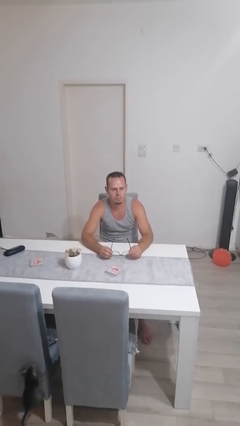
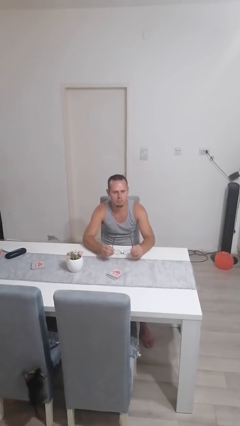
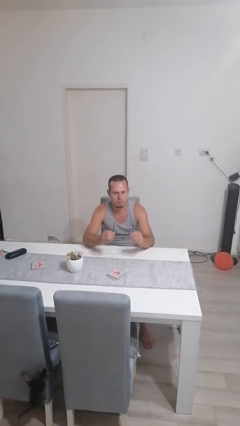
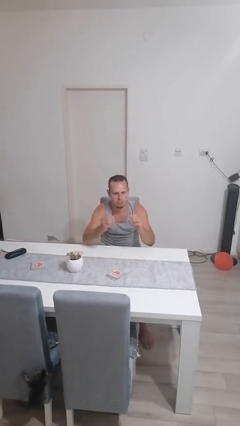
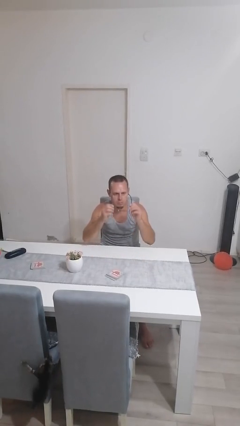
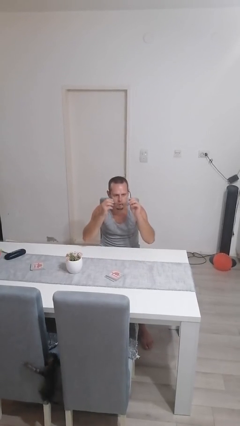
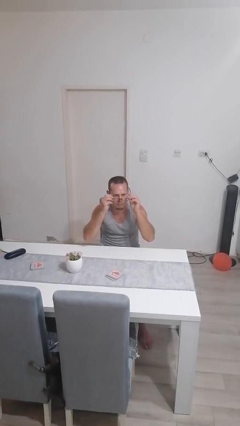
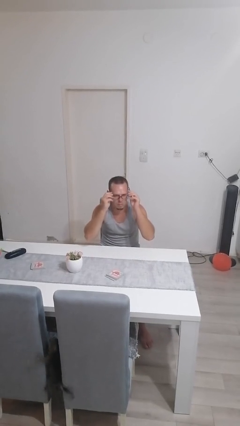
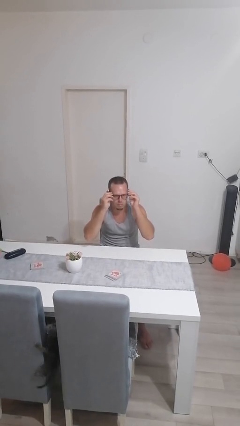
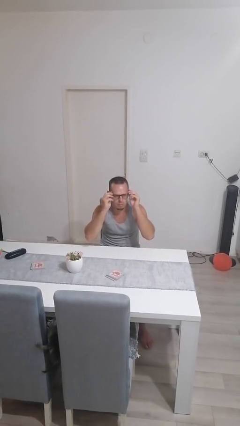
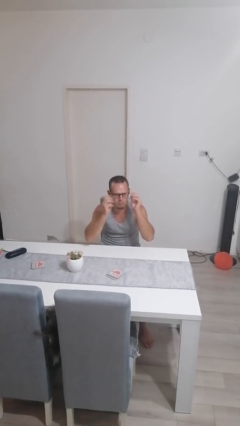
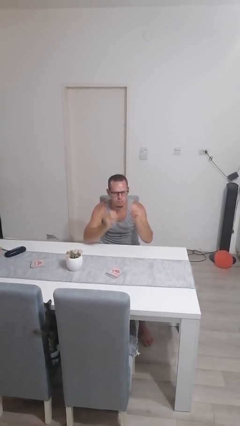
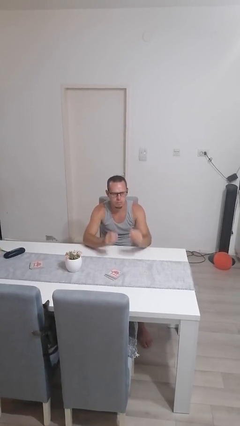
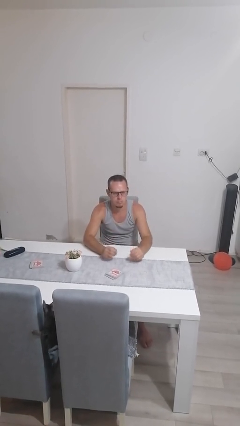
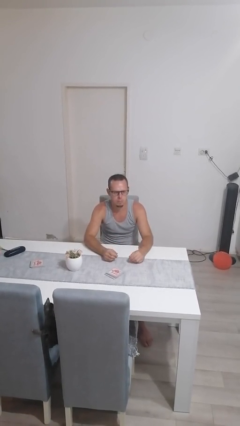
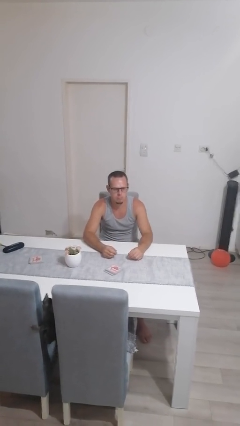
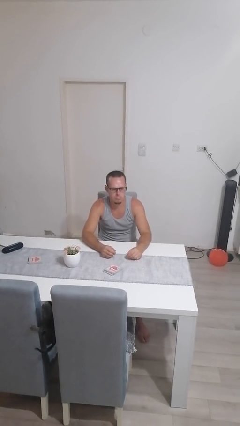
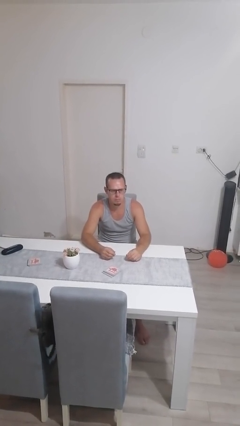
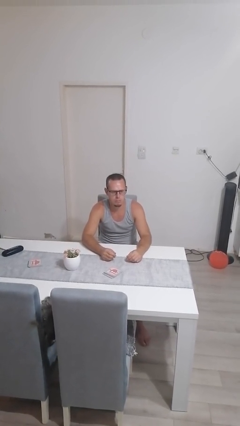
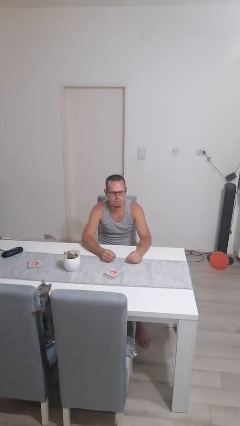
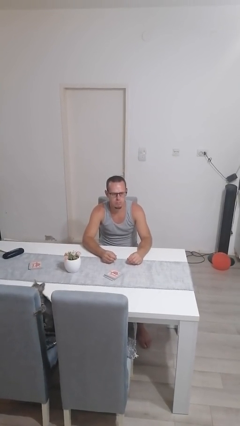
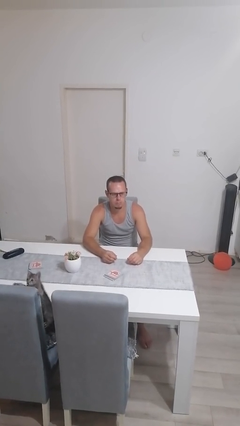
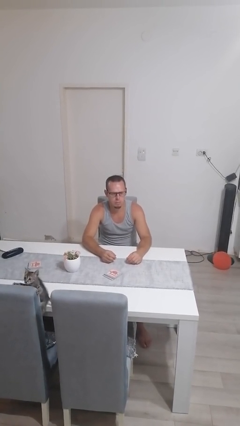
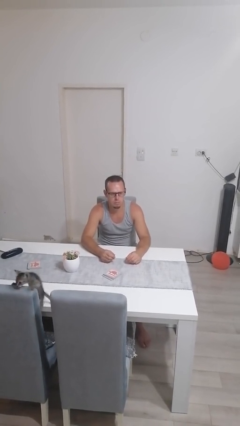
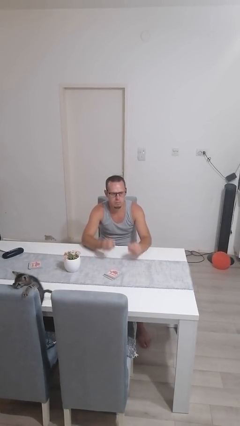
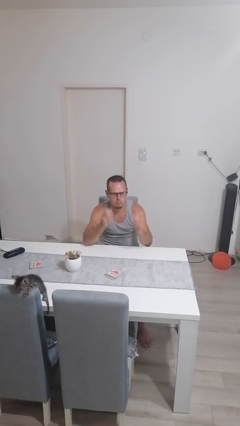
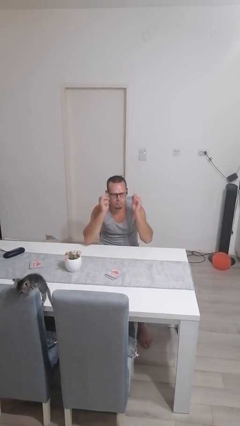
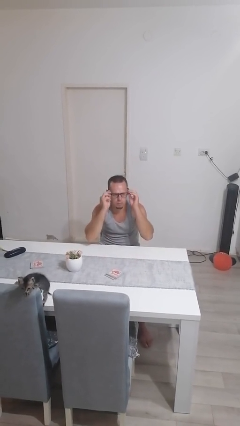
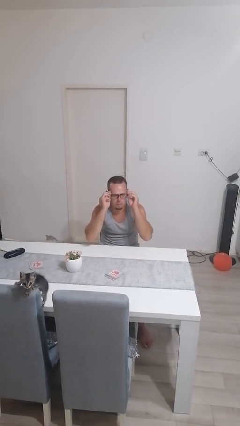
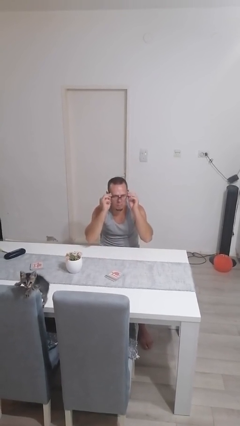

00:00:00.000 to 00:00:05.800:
person puts on glasses

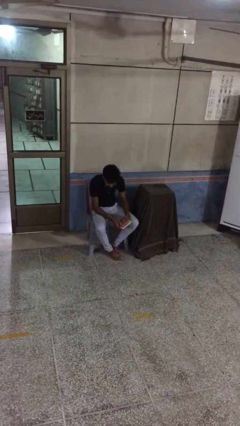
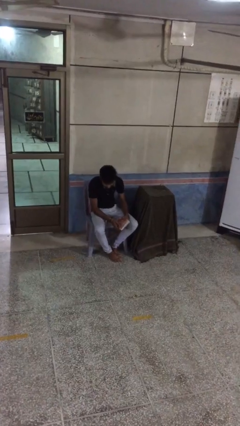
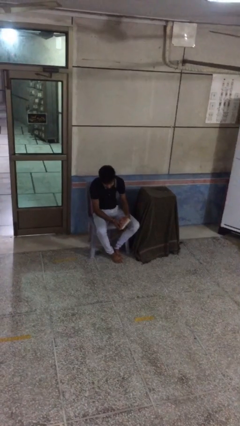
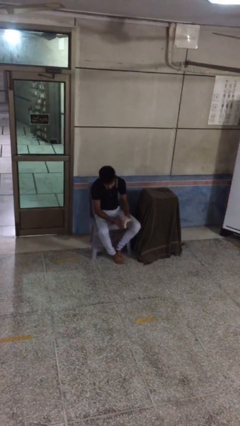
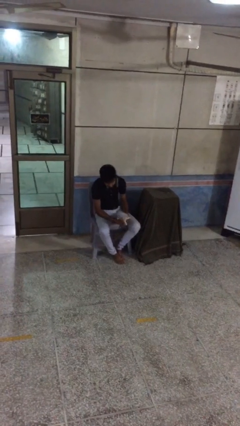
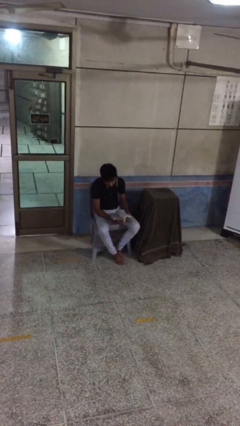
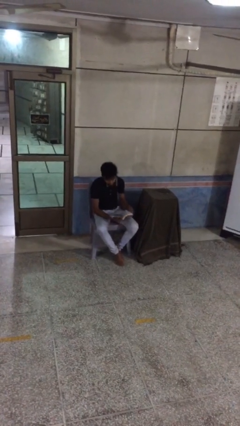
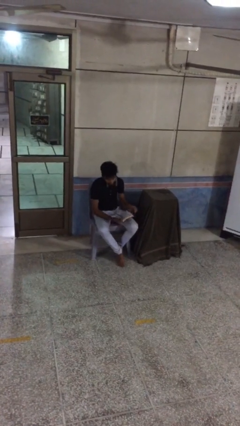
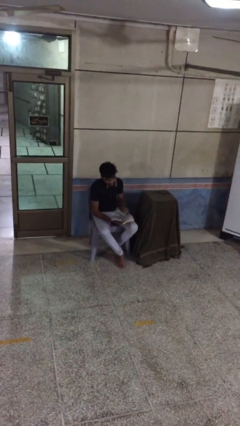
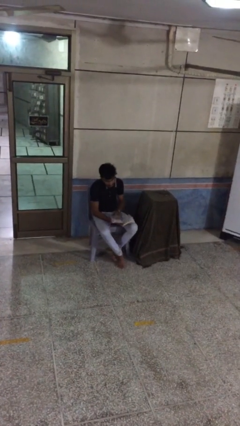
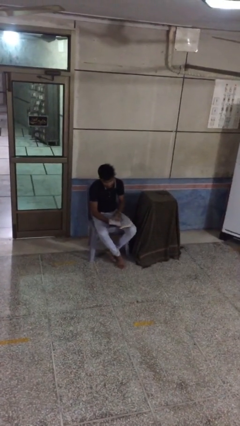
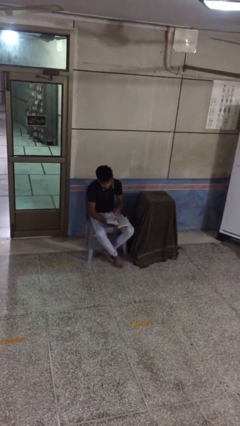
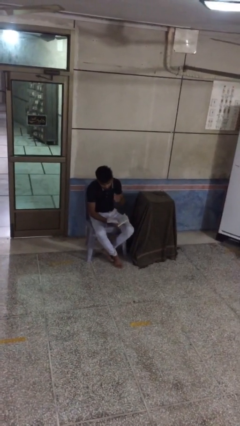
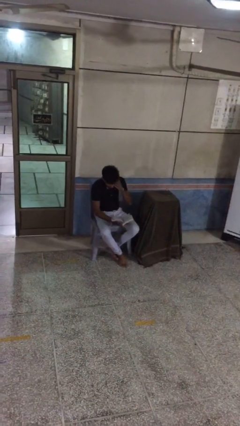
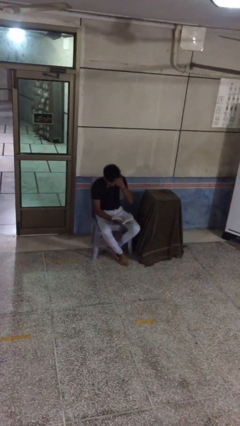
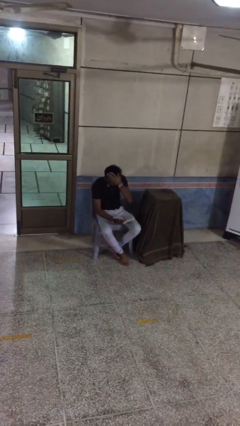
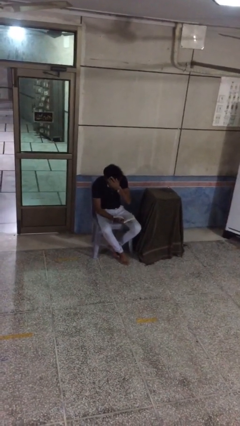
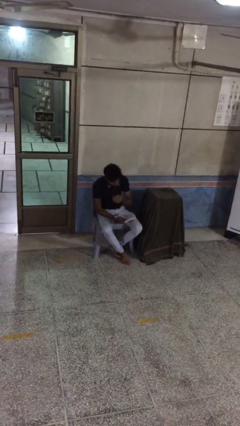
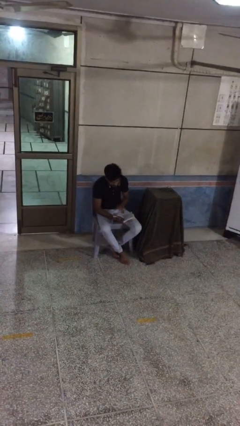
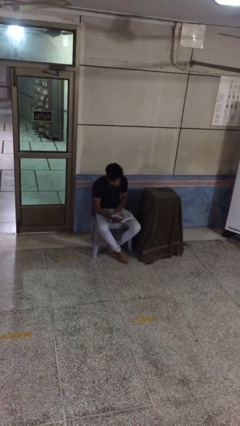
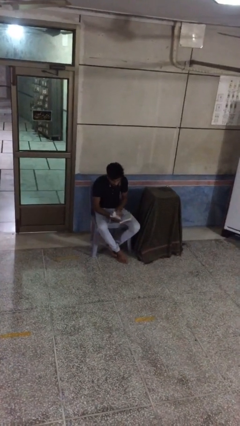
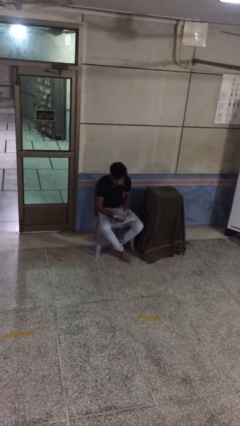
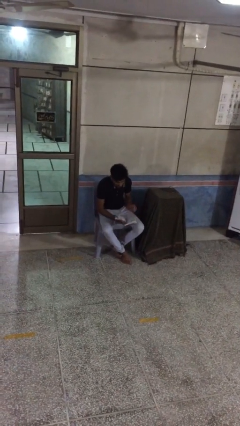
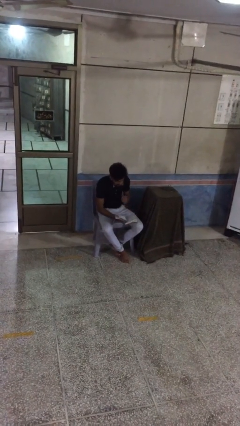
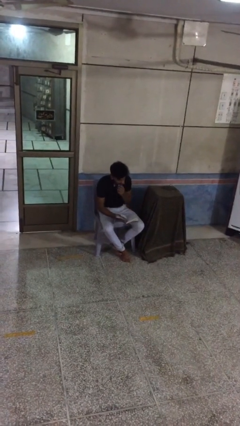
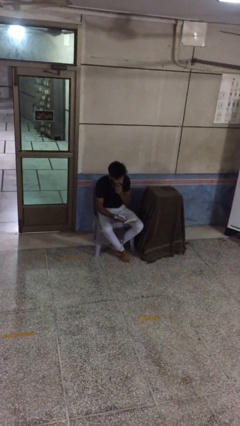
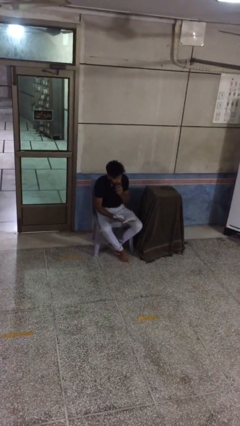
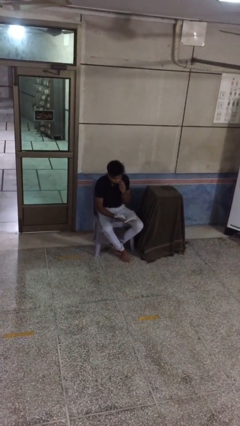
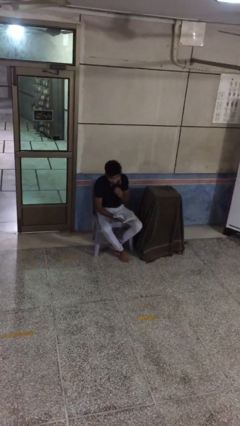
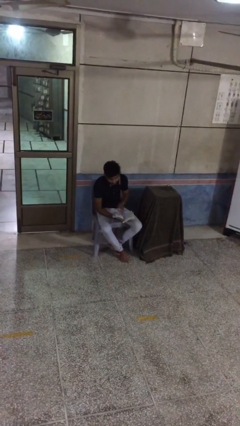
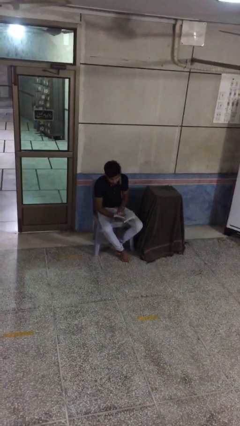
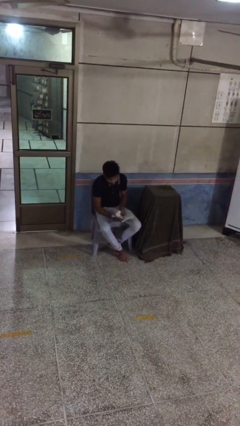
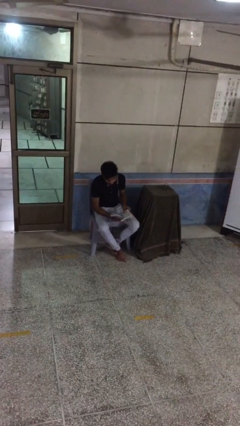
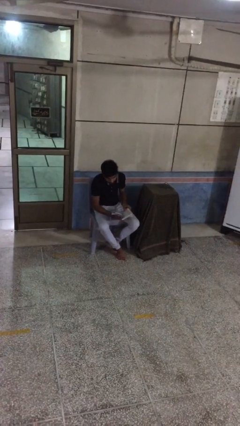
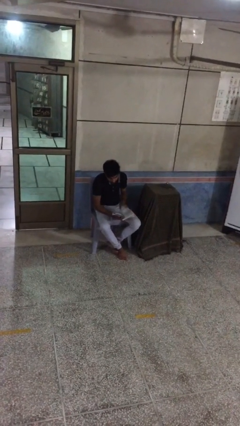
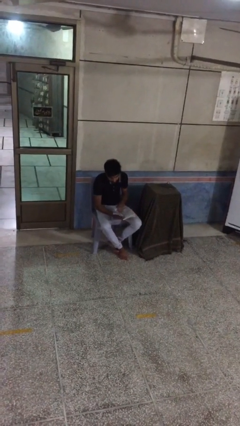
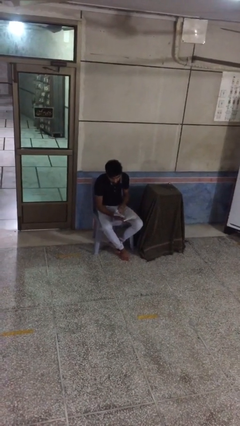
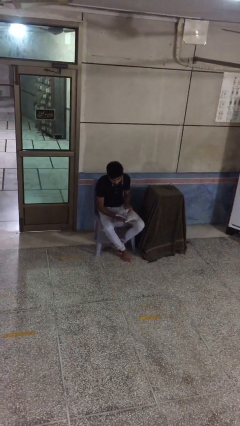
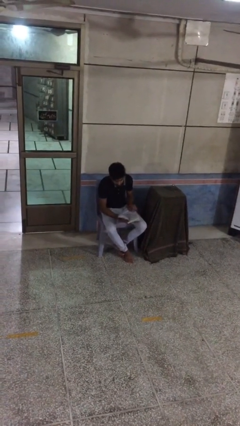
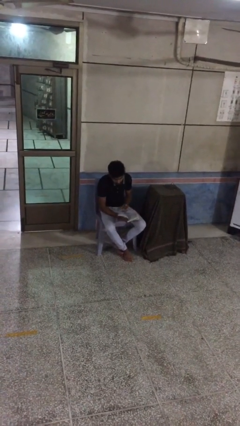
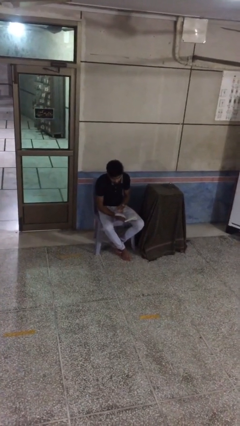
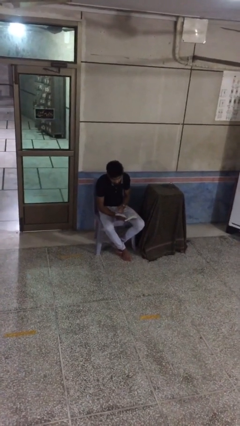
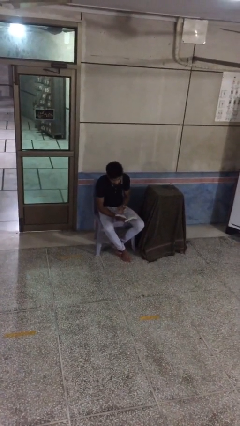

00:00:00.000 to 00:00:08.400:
person reads document

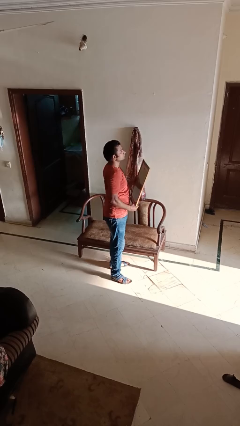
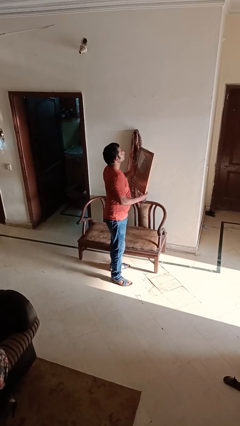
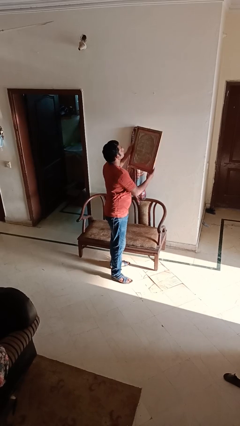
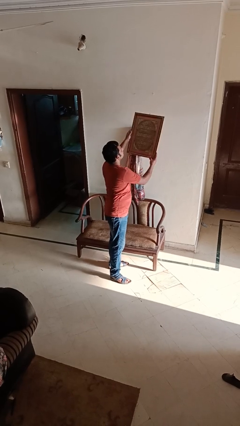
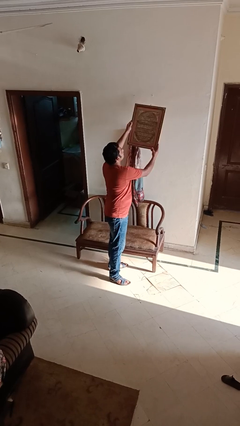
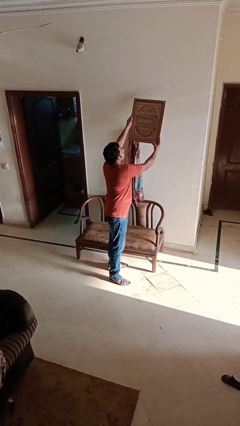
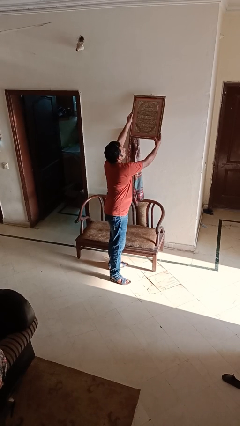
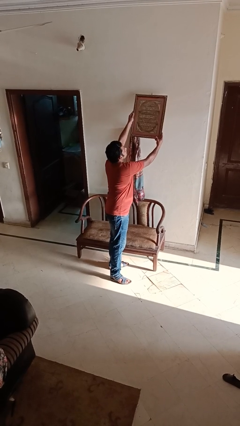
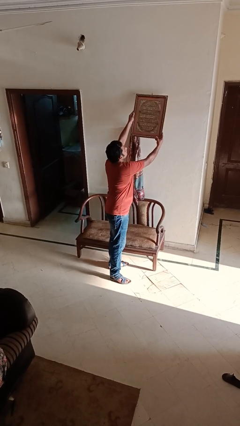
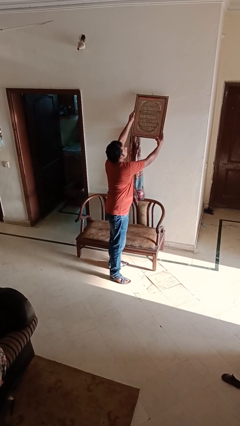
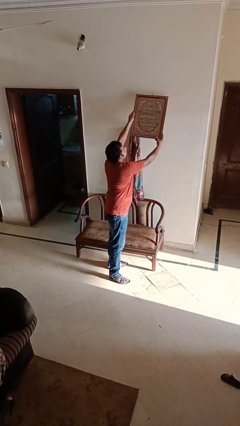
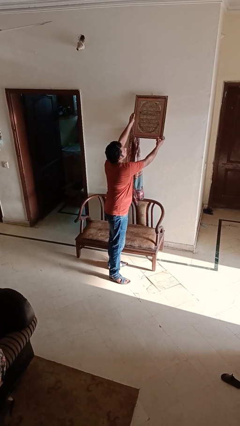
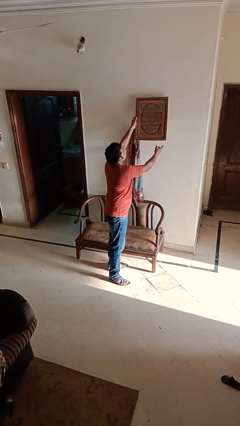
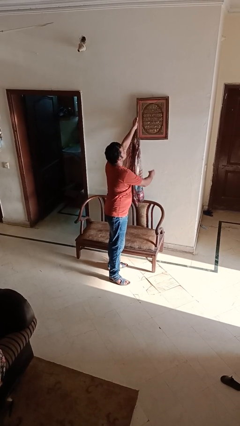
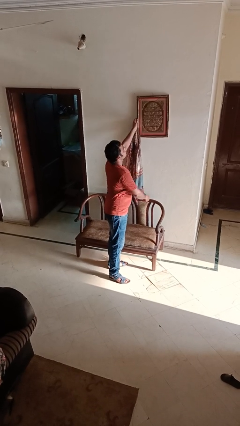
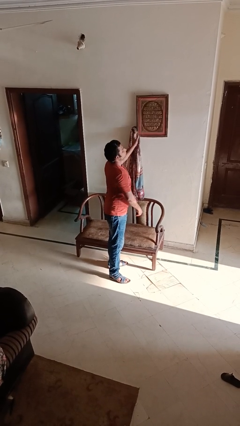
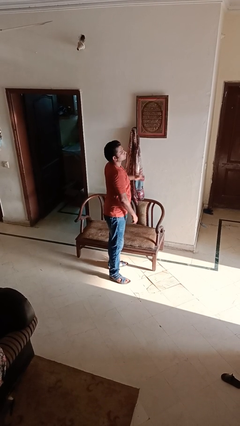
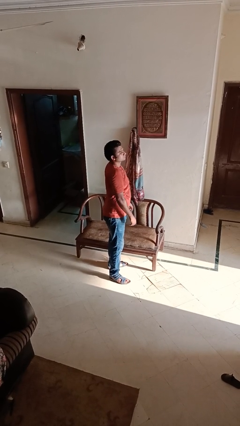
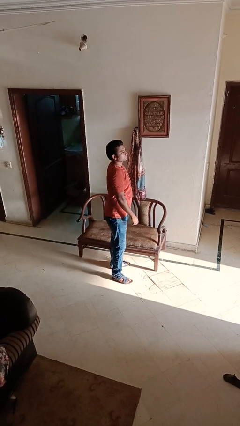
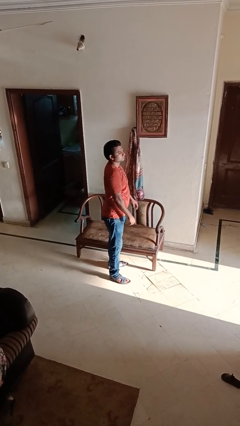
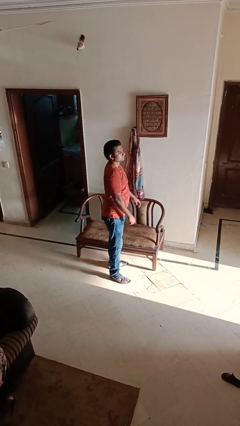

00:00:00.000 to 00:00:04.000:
person puts up picture frame
